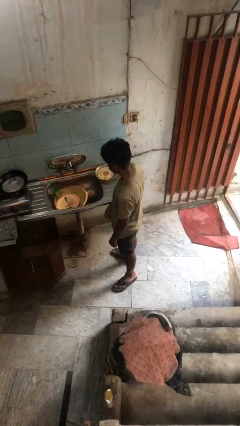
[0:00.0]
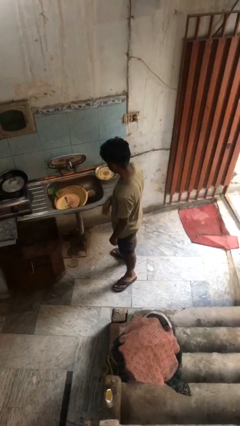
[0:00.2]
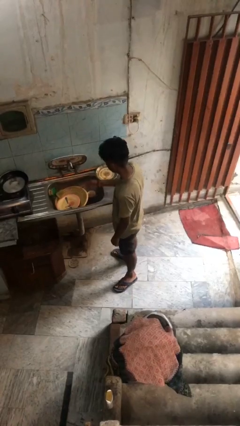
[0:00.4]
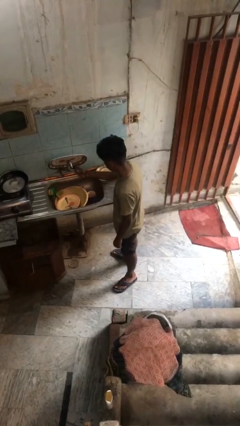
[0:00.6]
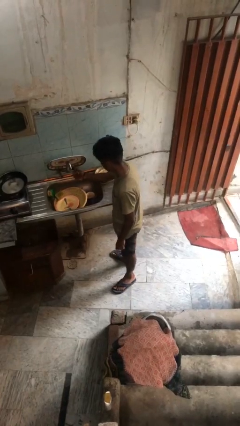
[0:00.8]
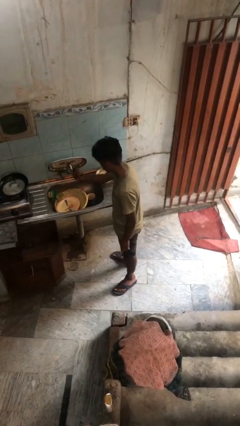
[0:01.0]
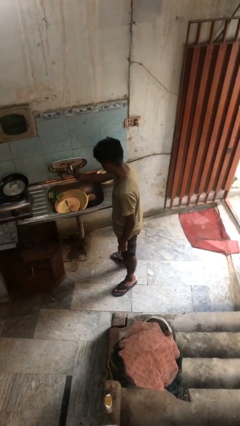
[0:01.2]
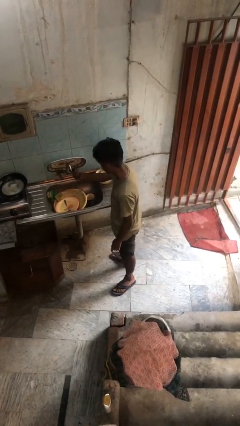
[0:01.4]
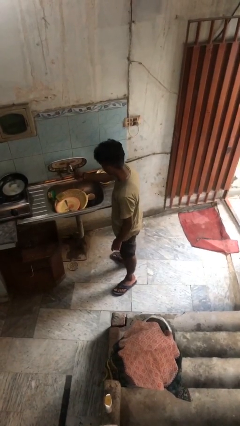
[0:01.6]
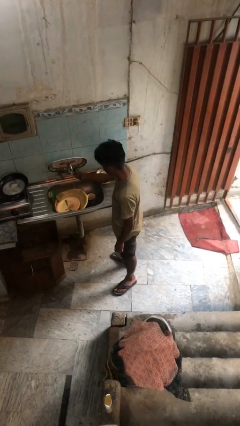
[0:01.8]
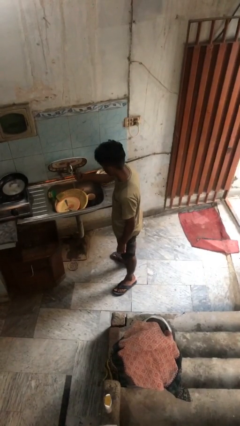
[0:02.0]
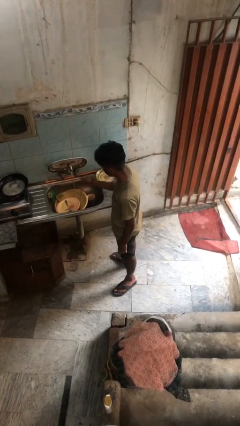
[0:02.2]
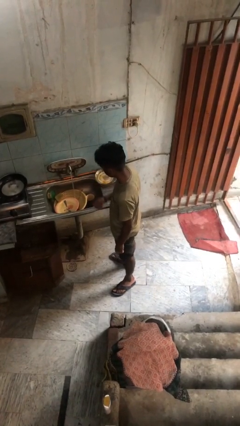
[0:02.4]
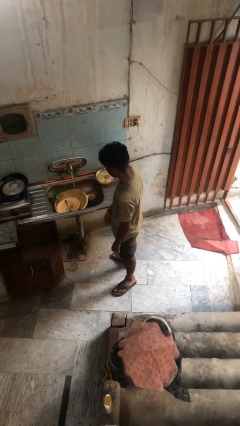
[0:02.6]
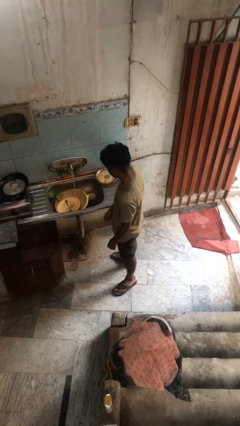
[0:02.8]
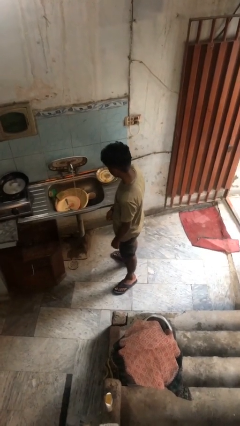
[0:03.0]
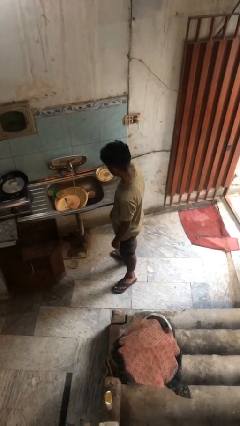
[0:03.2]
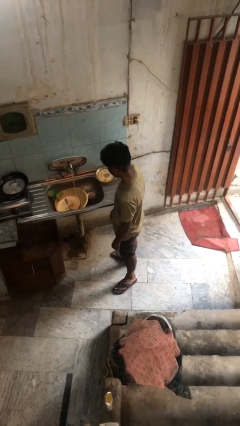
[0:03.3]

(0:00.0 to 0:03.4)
person turns on faucet

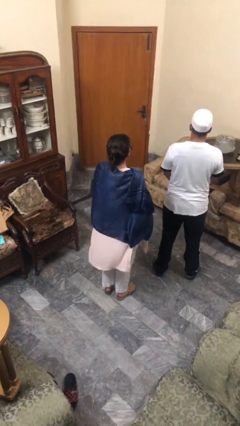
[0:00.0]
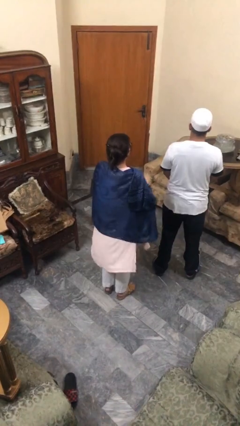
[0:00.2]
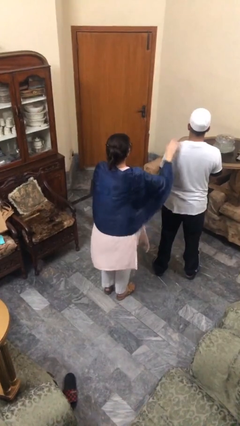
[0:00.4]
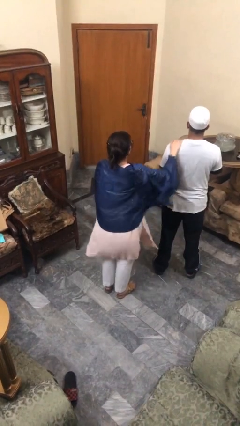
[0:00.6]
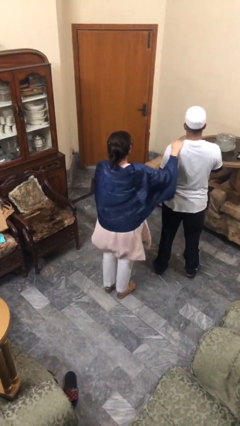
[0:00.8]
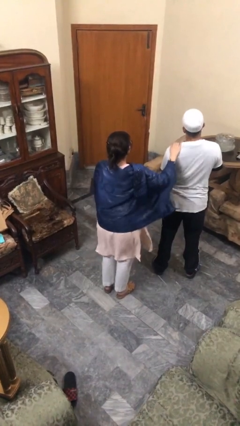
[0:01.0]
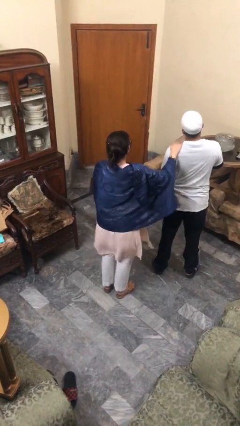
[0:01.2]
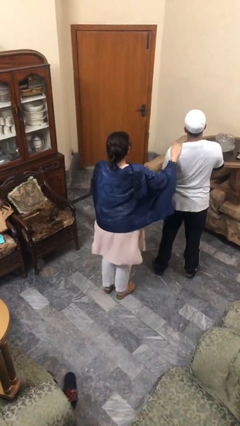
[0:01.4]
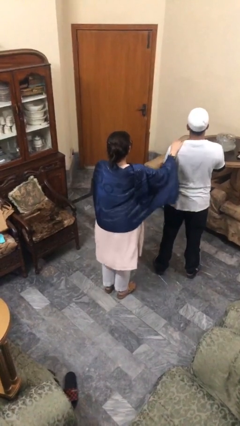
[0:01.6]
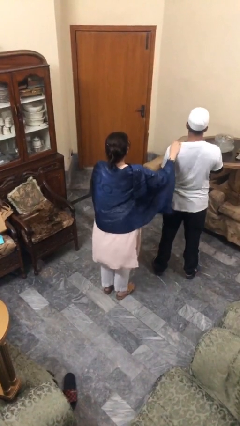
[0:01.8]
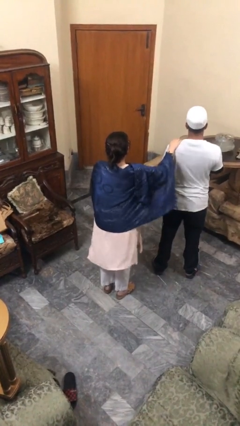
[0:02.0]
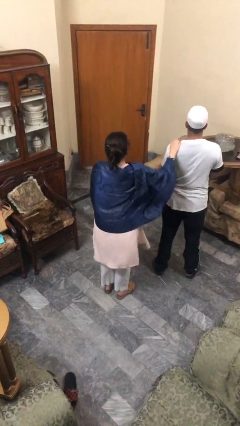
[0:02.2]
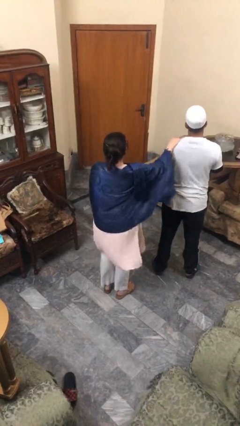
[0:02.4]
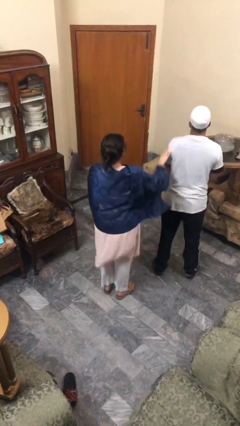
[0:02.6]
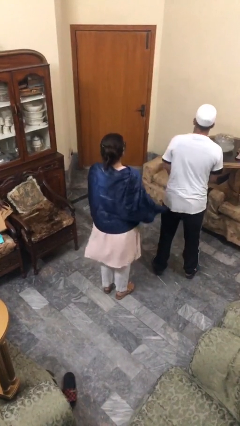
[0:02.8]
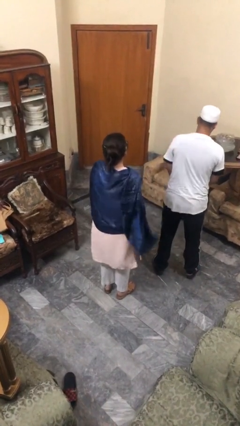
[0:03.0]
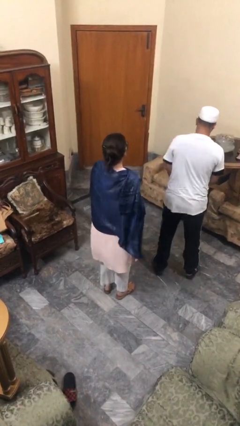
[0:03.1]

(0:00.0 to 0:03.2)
person pounds shoulders of person

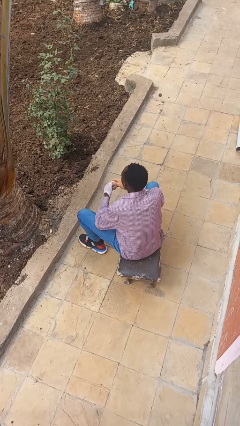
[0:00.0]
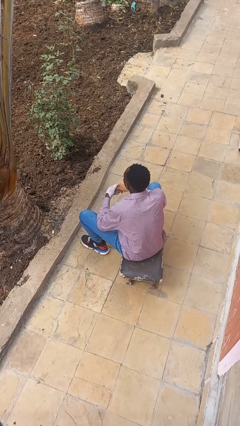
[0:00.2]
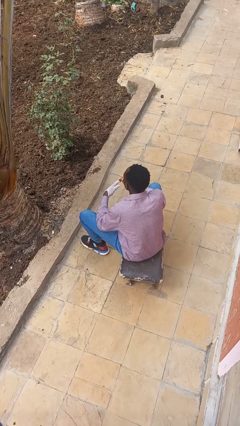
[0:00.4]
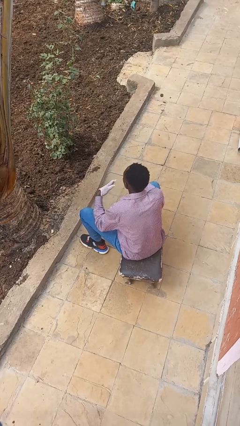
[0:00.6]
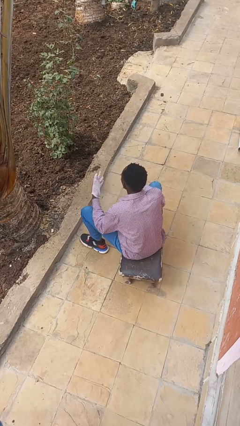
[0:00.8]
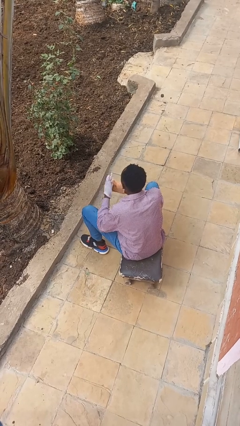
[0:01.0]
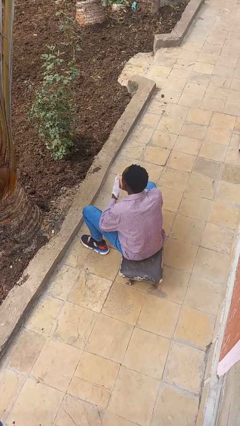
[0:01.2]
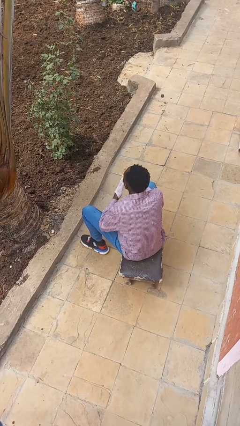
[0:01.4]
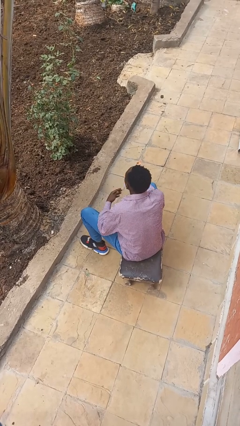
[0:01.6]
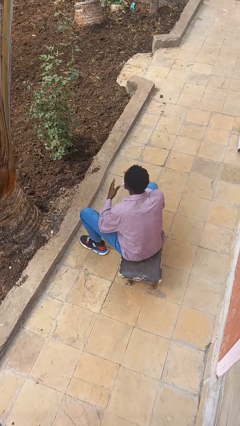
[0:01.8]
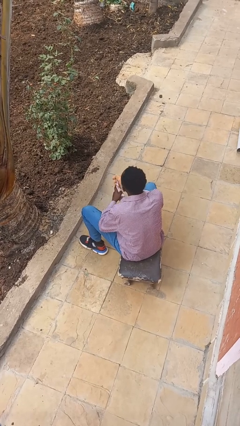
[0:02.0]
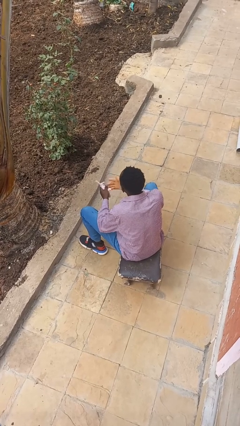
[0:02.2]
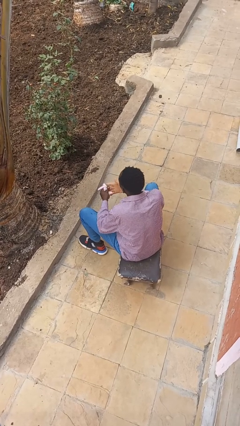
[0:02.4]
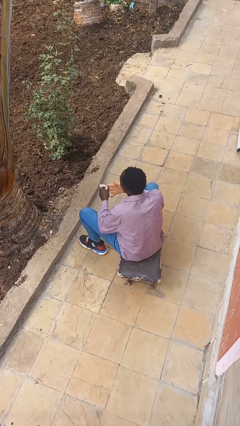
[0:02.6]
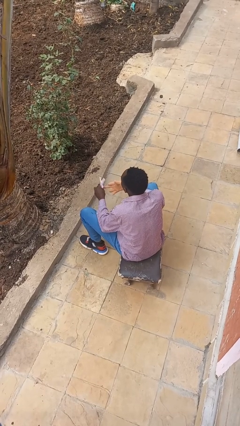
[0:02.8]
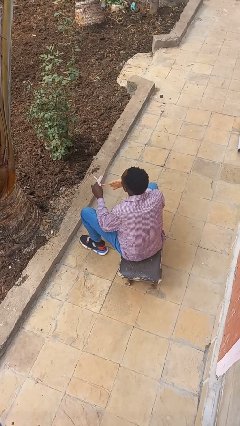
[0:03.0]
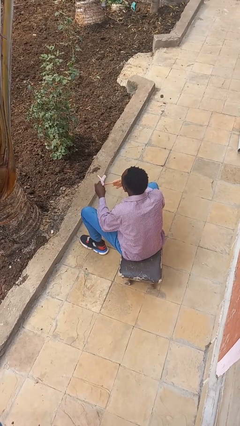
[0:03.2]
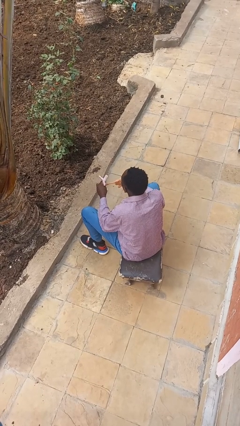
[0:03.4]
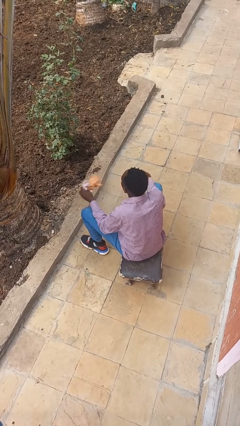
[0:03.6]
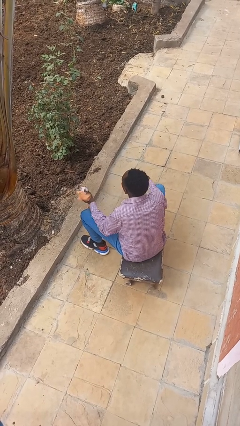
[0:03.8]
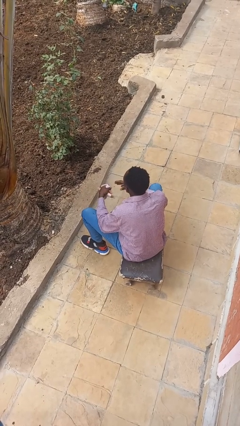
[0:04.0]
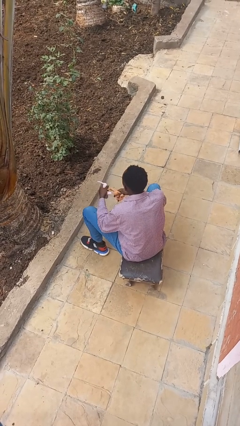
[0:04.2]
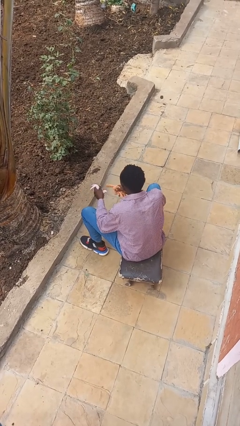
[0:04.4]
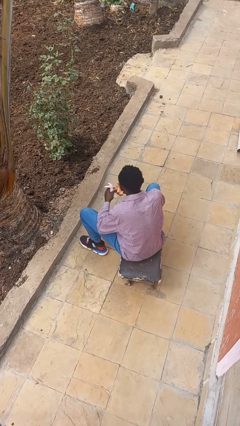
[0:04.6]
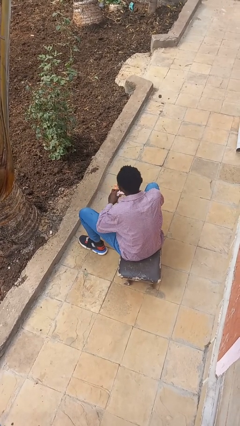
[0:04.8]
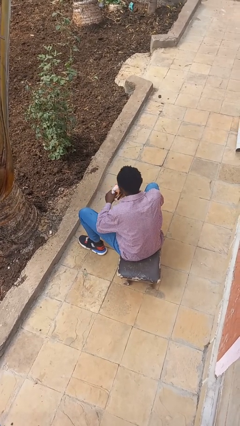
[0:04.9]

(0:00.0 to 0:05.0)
person takes off gloves

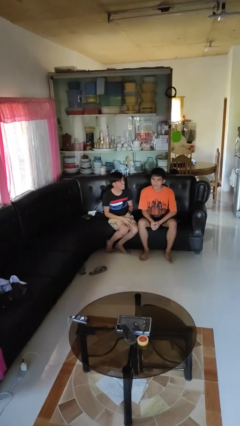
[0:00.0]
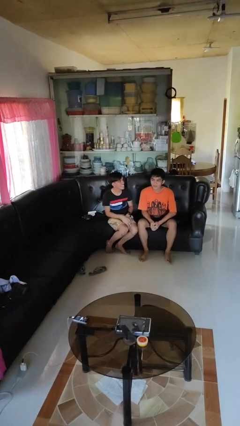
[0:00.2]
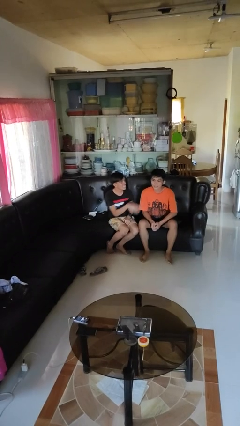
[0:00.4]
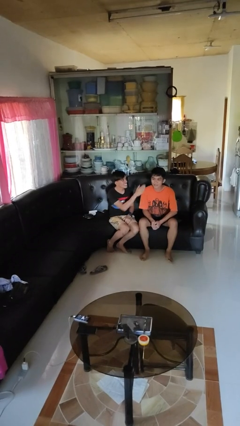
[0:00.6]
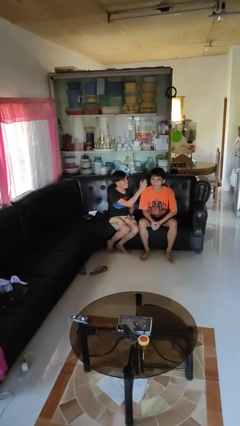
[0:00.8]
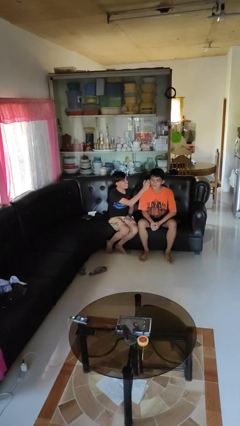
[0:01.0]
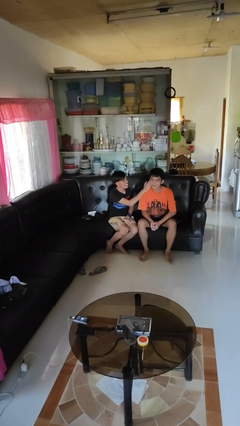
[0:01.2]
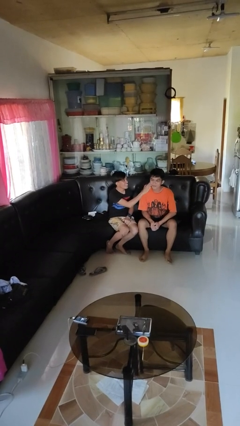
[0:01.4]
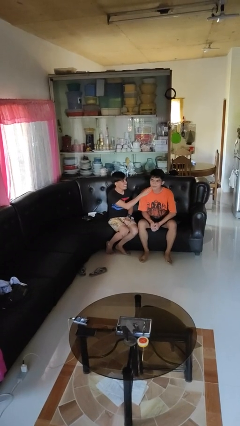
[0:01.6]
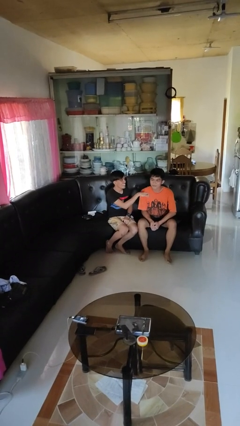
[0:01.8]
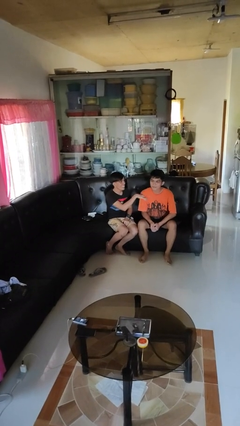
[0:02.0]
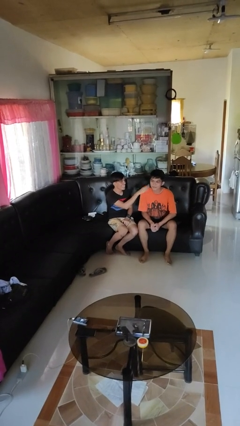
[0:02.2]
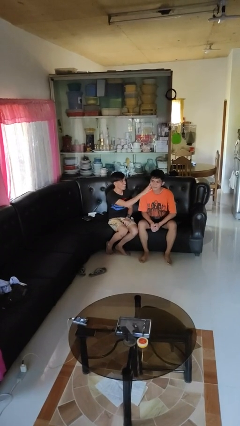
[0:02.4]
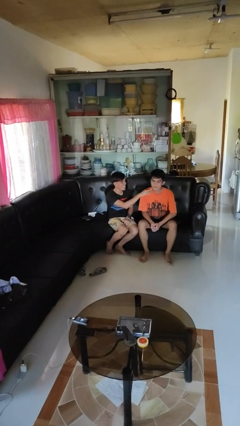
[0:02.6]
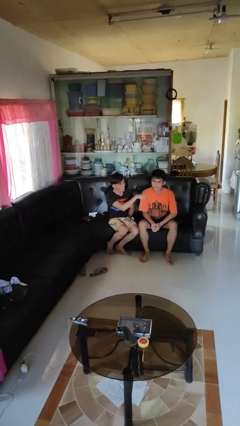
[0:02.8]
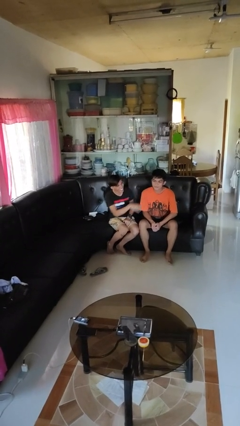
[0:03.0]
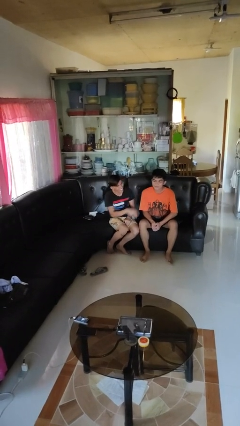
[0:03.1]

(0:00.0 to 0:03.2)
person touches face of person

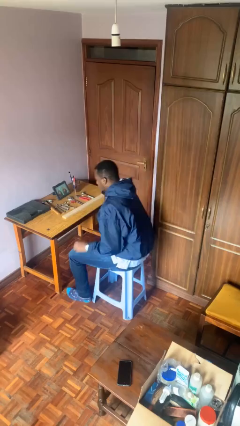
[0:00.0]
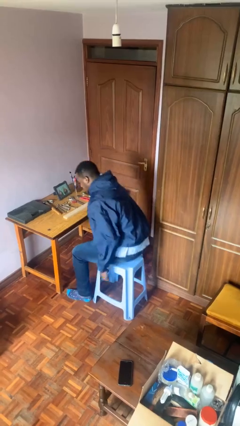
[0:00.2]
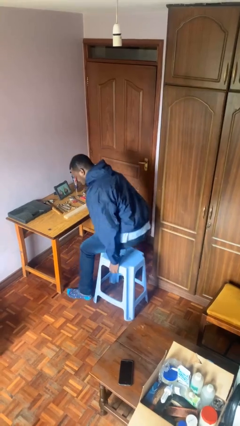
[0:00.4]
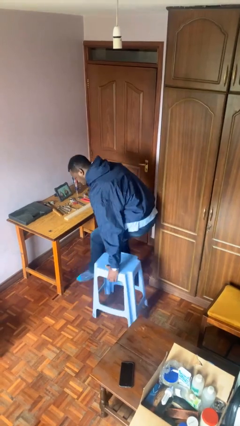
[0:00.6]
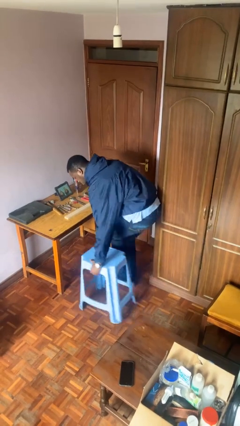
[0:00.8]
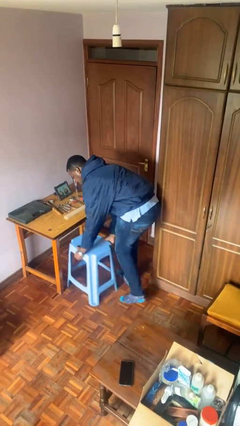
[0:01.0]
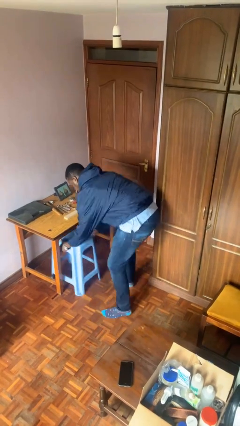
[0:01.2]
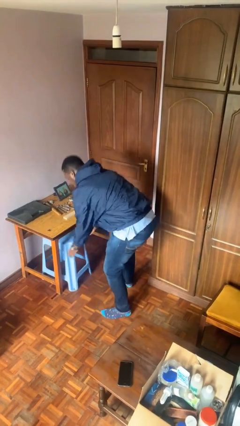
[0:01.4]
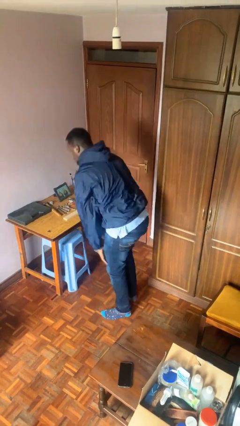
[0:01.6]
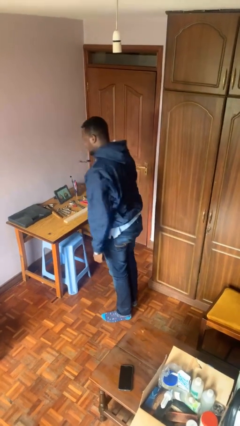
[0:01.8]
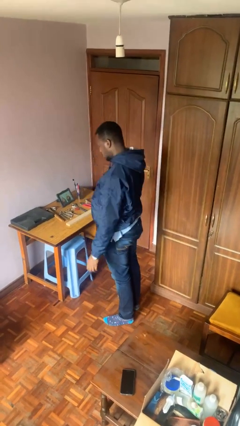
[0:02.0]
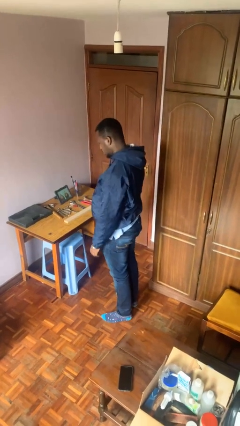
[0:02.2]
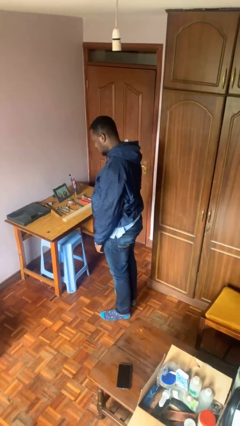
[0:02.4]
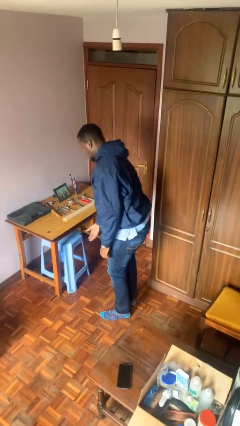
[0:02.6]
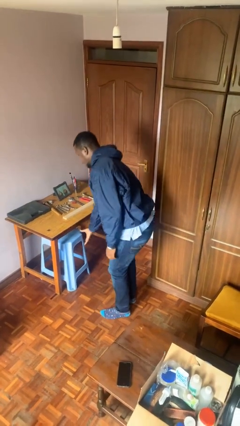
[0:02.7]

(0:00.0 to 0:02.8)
person stands up

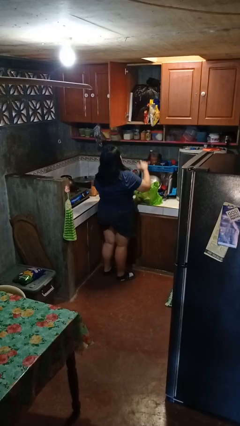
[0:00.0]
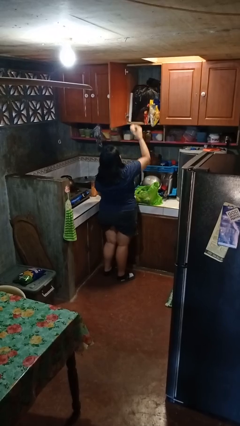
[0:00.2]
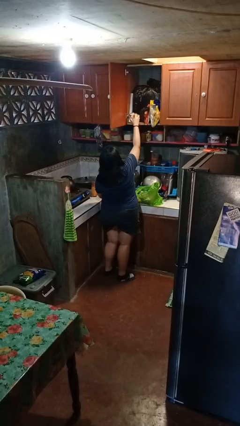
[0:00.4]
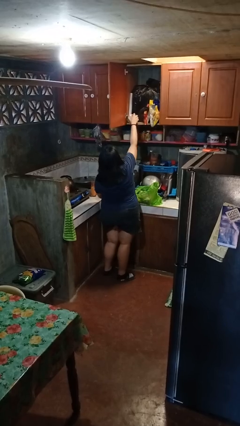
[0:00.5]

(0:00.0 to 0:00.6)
person loads groceries into cabinet
